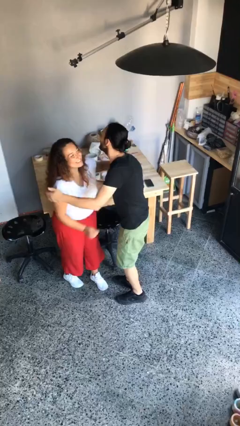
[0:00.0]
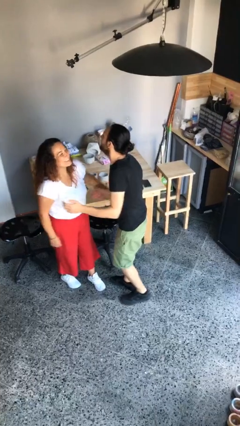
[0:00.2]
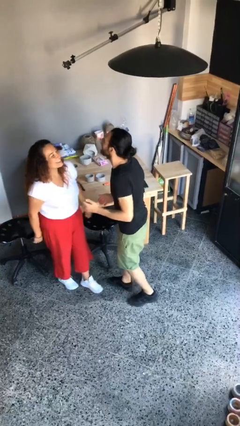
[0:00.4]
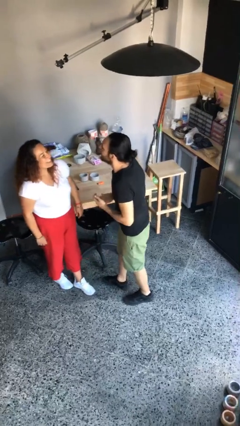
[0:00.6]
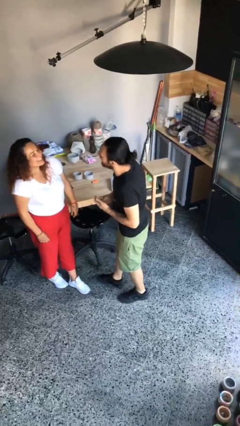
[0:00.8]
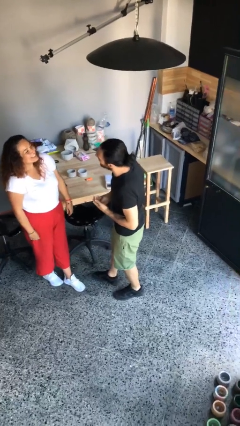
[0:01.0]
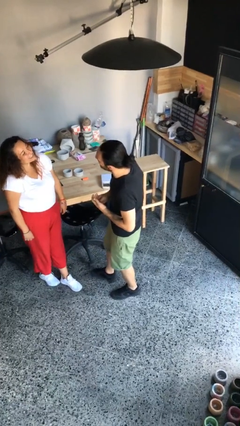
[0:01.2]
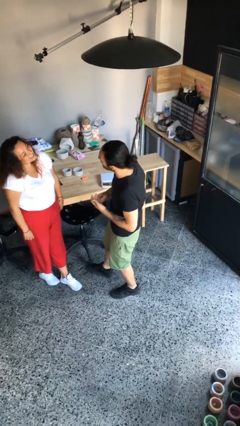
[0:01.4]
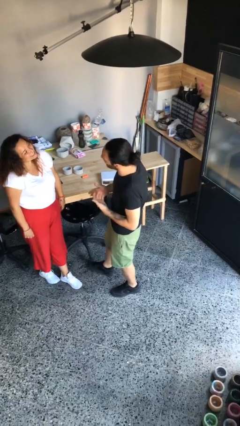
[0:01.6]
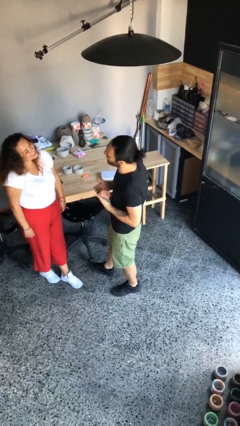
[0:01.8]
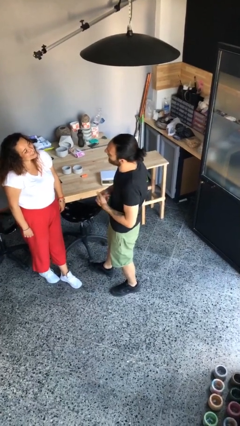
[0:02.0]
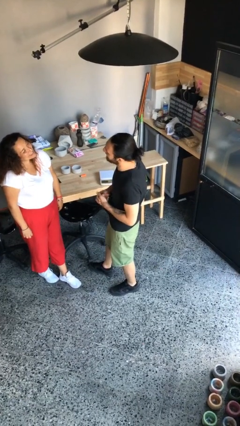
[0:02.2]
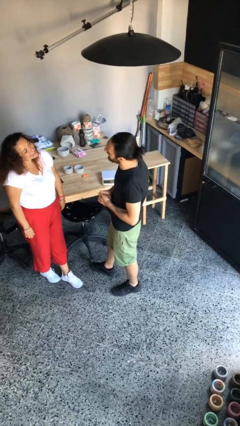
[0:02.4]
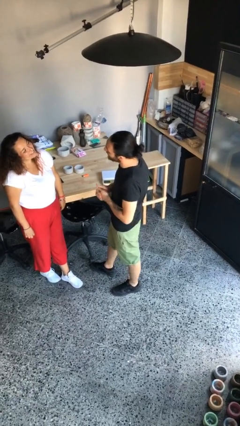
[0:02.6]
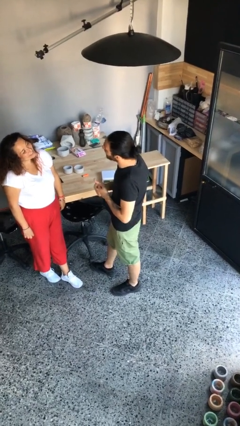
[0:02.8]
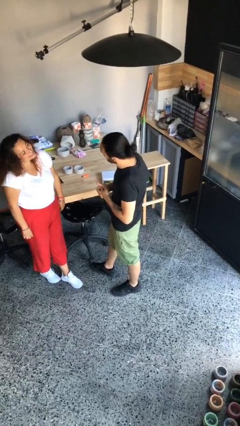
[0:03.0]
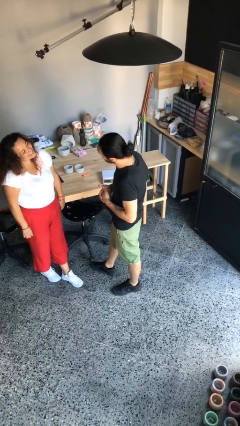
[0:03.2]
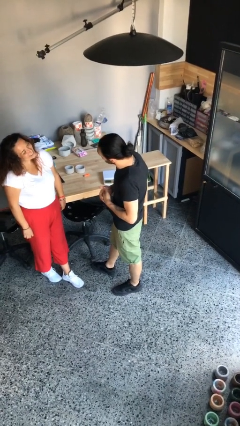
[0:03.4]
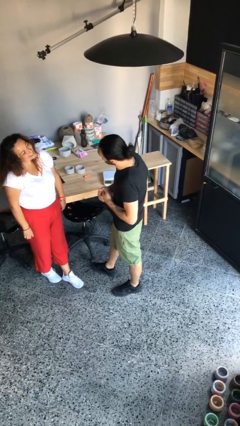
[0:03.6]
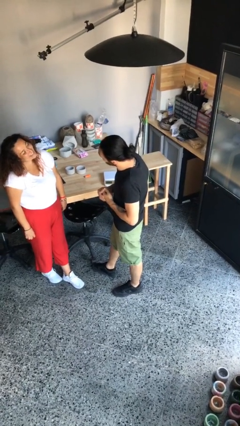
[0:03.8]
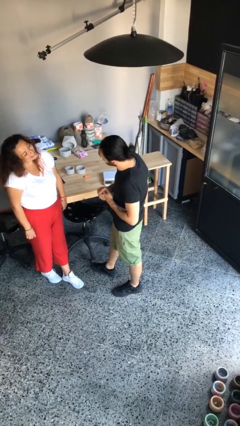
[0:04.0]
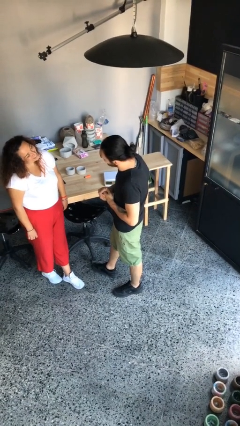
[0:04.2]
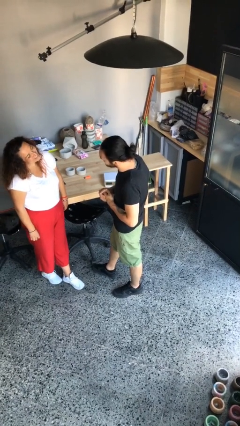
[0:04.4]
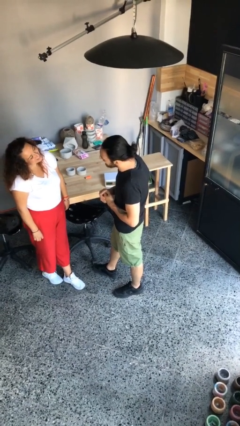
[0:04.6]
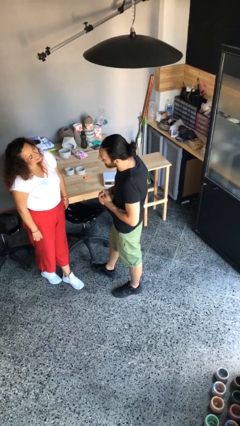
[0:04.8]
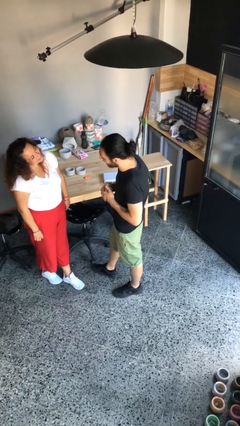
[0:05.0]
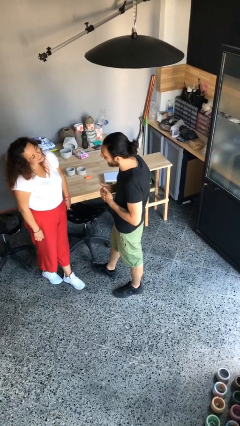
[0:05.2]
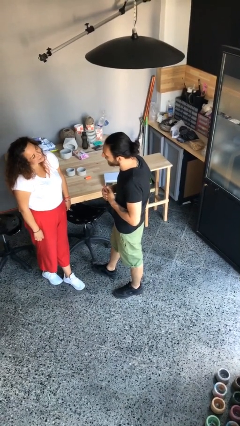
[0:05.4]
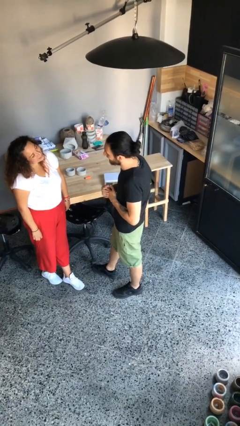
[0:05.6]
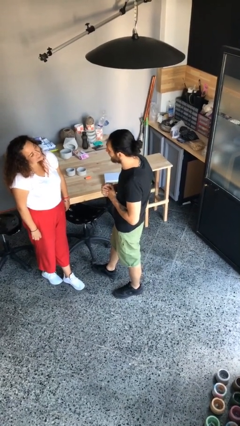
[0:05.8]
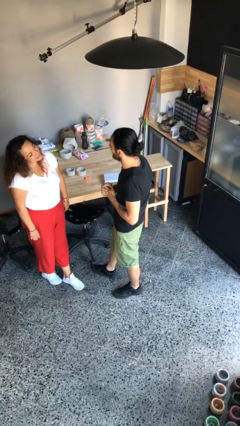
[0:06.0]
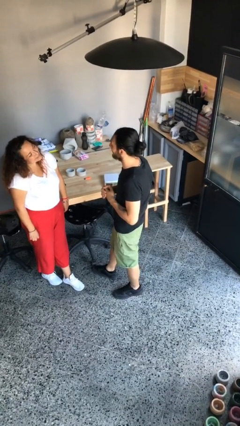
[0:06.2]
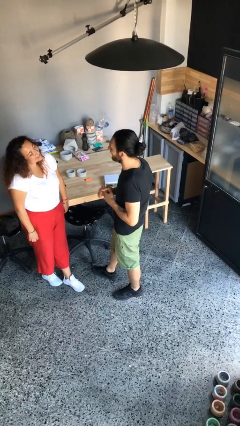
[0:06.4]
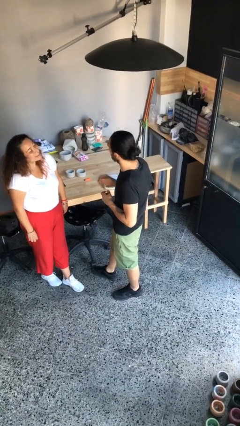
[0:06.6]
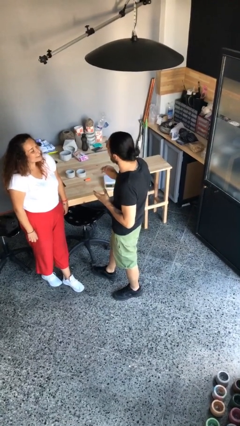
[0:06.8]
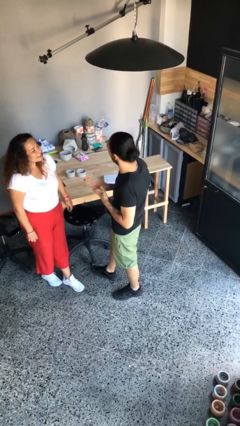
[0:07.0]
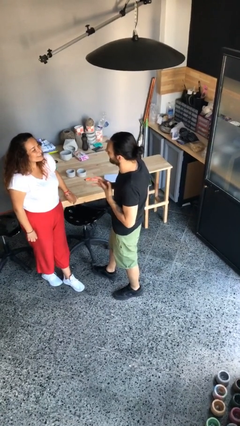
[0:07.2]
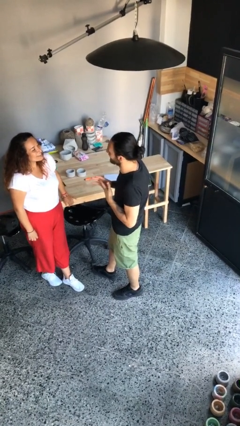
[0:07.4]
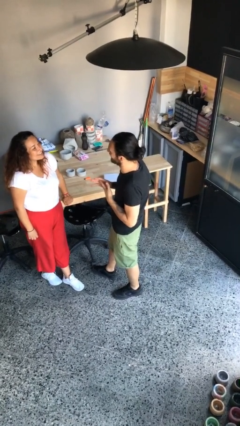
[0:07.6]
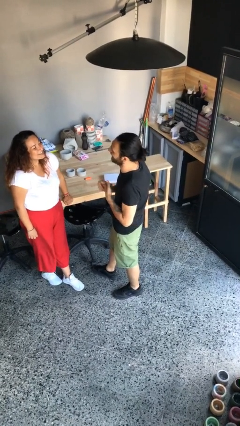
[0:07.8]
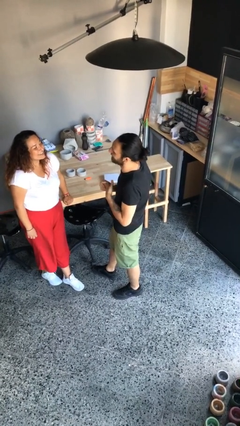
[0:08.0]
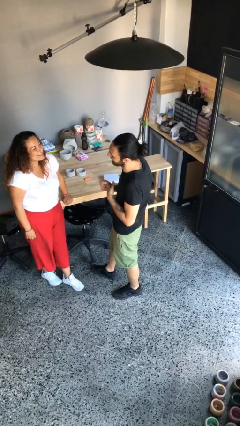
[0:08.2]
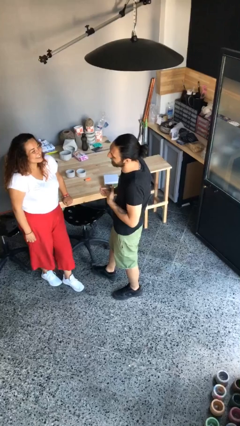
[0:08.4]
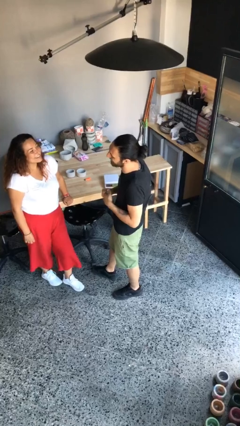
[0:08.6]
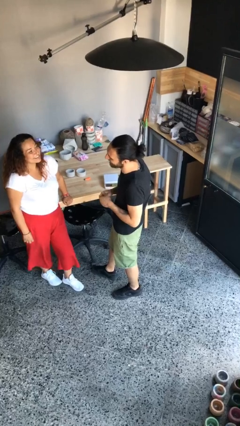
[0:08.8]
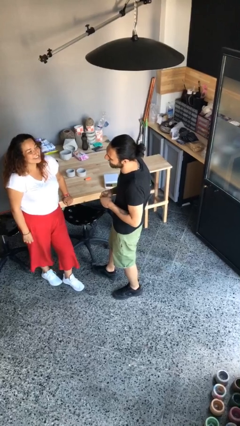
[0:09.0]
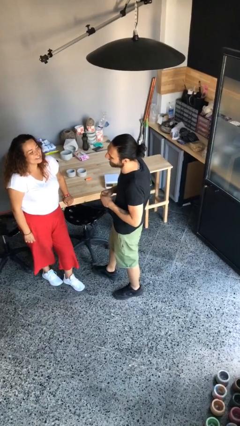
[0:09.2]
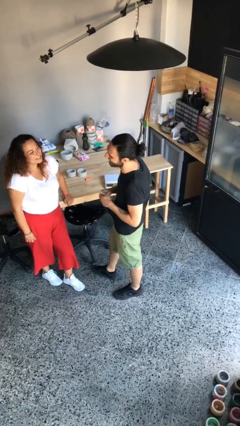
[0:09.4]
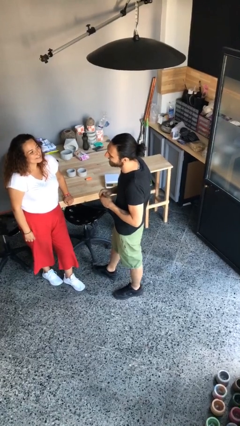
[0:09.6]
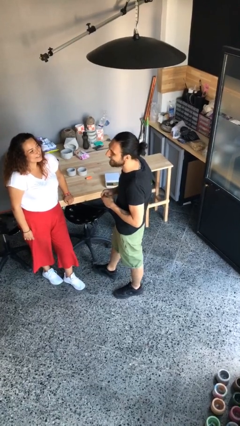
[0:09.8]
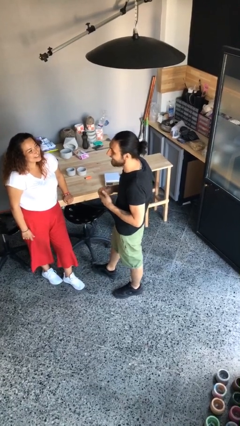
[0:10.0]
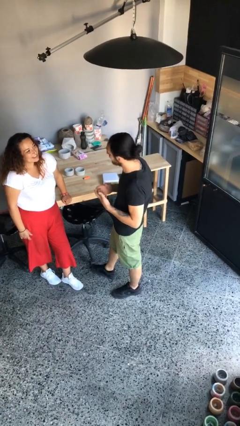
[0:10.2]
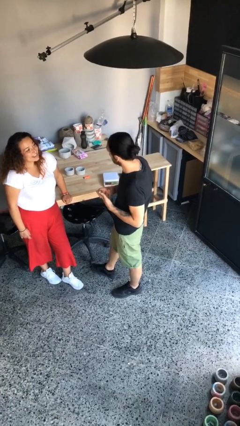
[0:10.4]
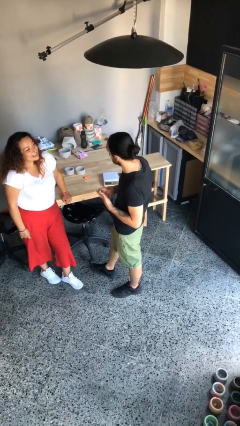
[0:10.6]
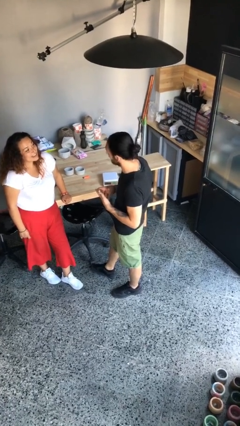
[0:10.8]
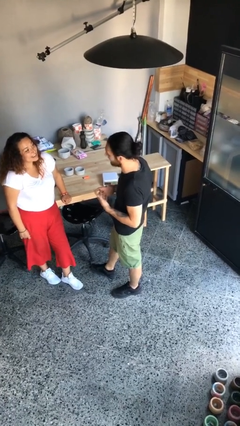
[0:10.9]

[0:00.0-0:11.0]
person talks to person

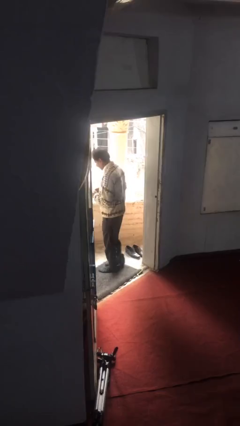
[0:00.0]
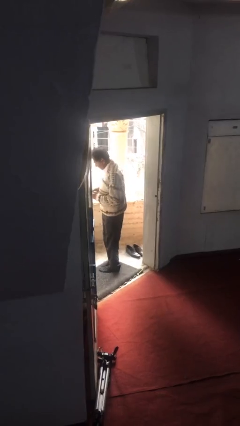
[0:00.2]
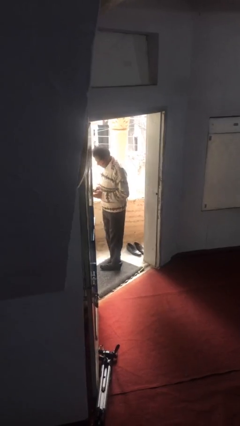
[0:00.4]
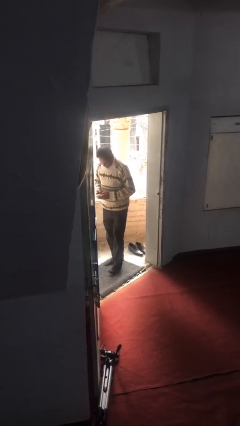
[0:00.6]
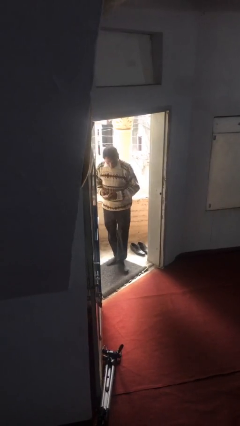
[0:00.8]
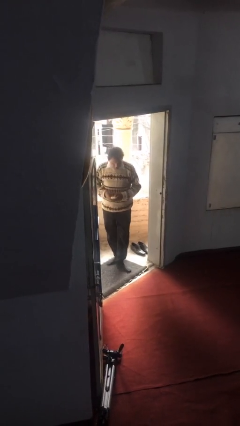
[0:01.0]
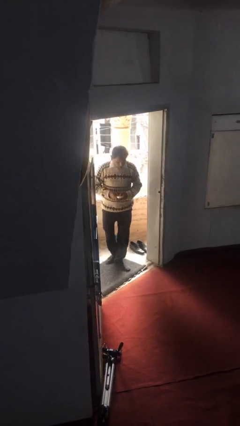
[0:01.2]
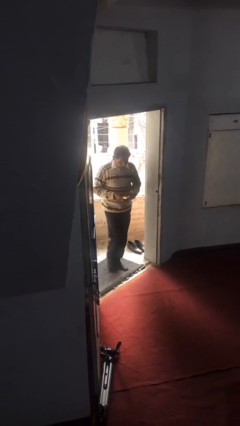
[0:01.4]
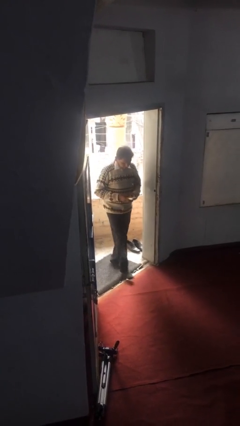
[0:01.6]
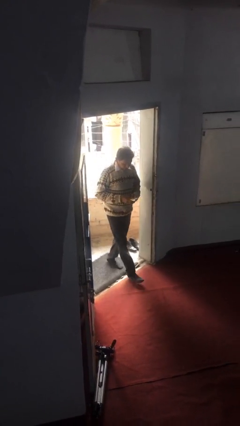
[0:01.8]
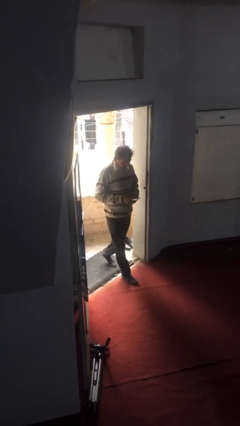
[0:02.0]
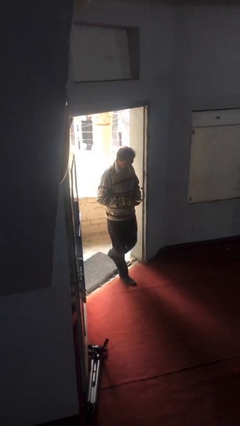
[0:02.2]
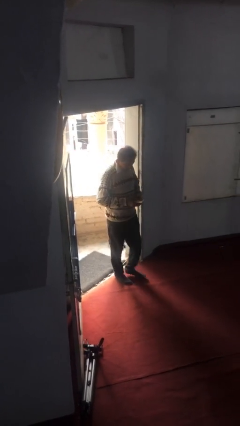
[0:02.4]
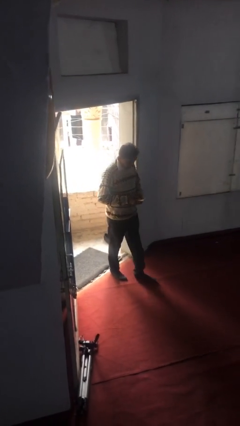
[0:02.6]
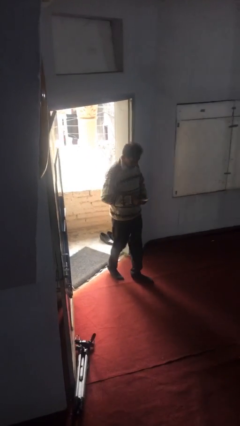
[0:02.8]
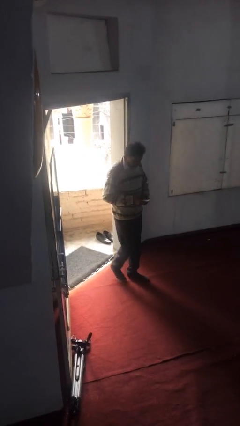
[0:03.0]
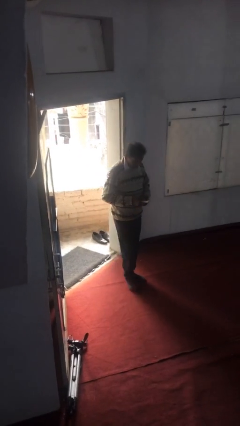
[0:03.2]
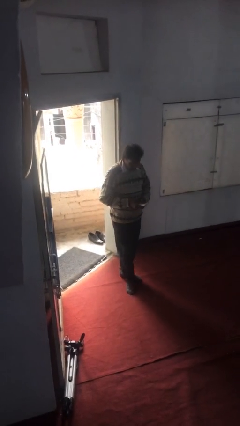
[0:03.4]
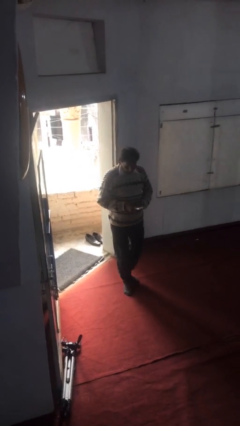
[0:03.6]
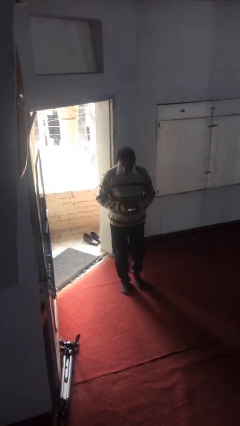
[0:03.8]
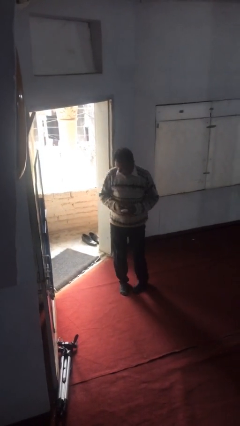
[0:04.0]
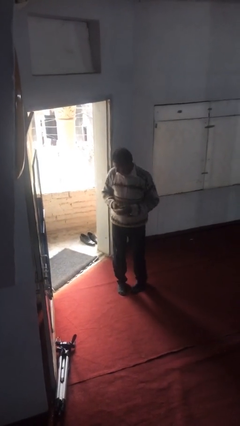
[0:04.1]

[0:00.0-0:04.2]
person enters scene through structure

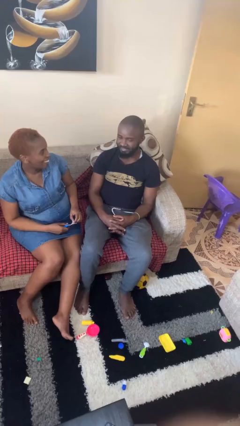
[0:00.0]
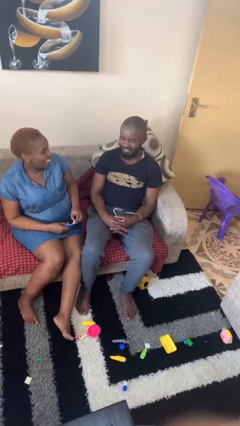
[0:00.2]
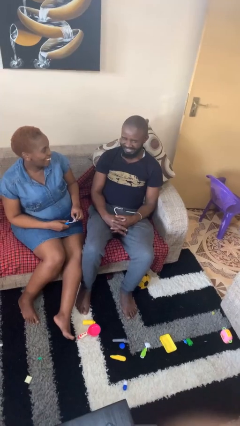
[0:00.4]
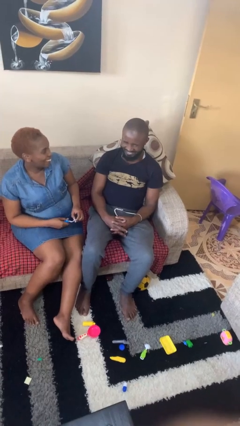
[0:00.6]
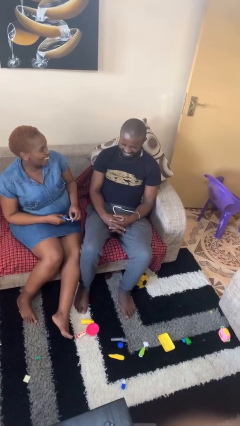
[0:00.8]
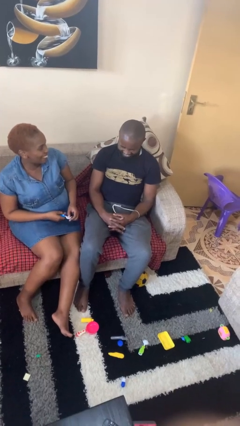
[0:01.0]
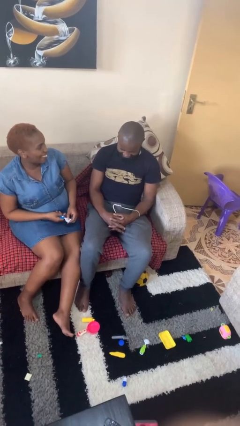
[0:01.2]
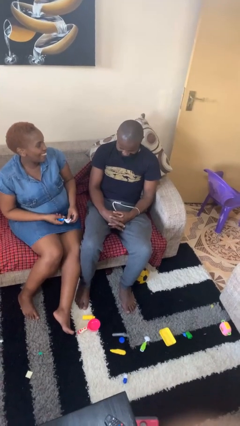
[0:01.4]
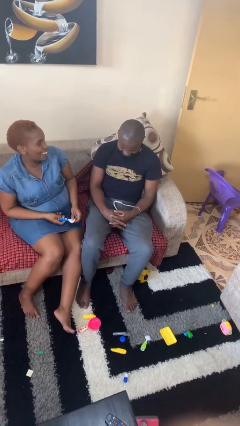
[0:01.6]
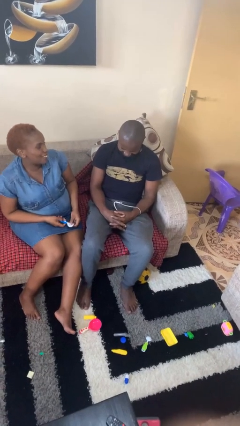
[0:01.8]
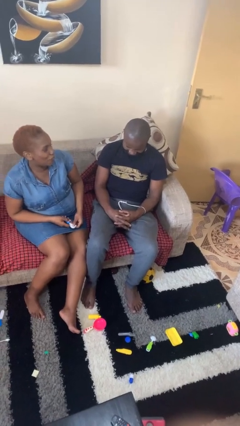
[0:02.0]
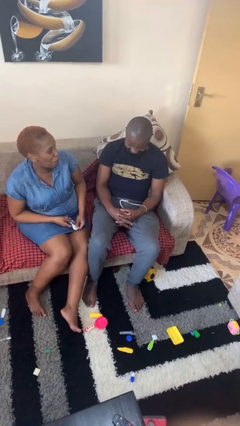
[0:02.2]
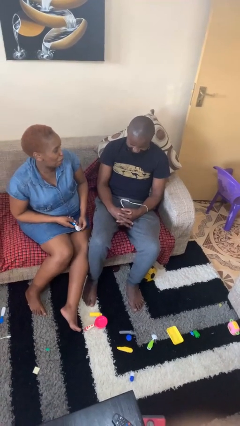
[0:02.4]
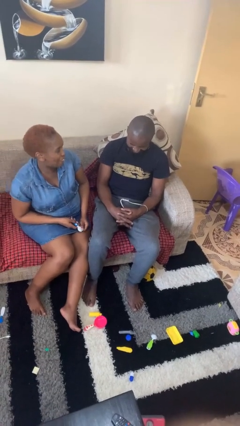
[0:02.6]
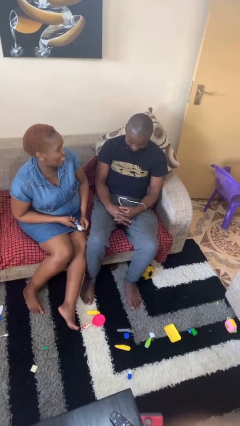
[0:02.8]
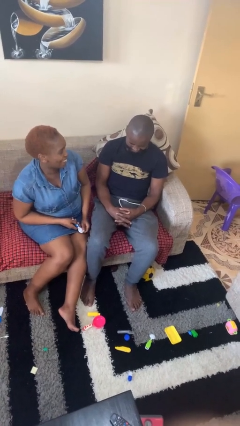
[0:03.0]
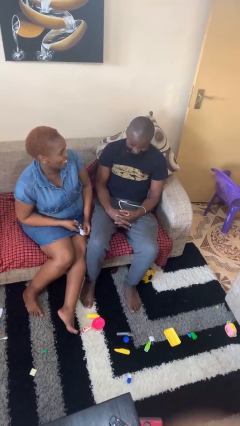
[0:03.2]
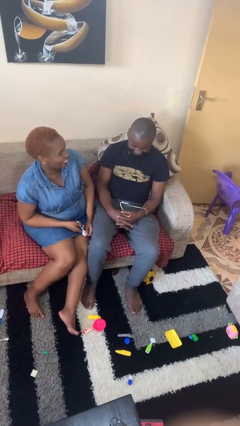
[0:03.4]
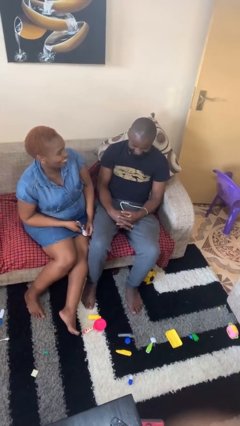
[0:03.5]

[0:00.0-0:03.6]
person laughs with person
